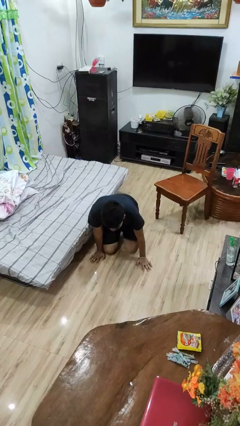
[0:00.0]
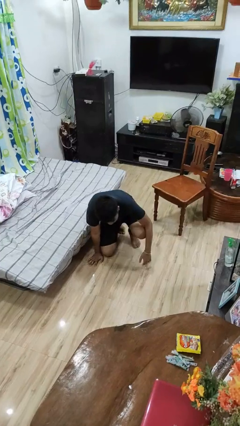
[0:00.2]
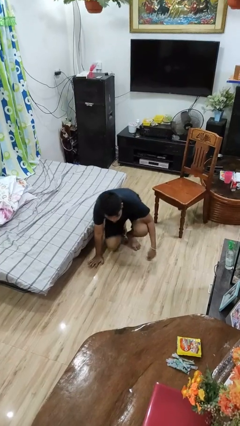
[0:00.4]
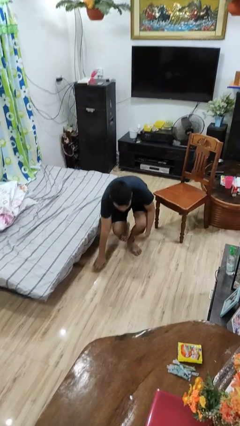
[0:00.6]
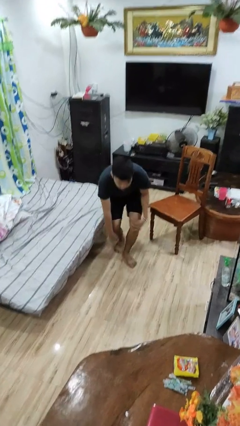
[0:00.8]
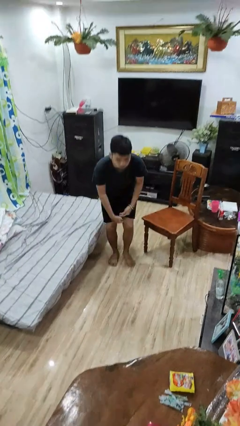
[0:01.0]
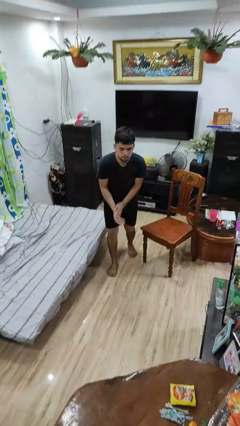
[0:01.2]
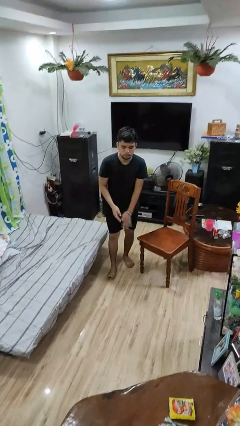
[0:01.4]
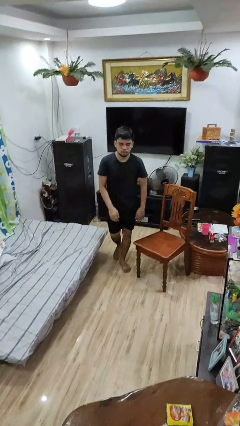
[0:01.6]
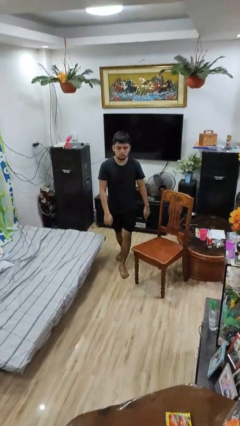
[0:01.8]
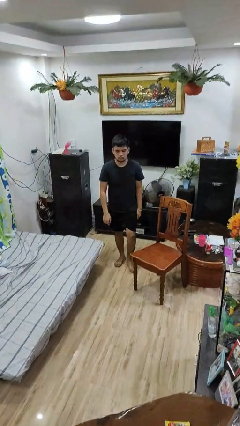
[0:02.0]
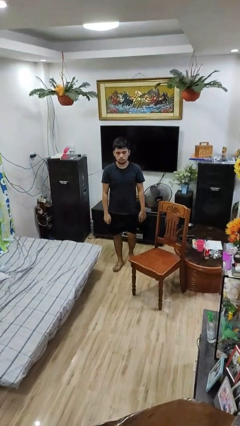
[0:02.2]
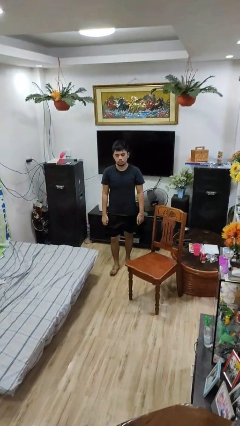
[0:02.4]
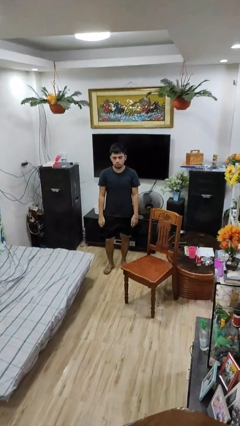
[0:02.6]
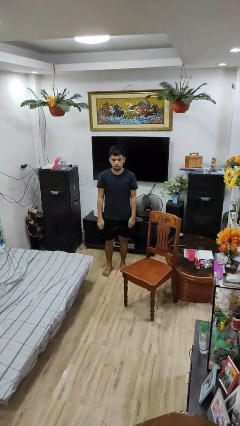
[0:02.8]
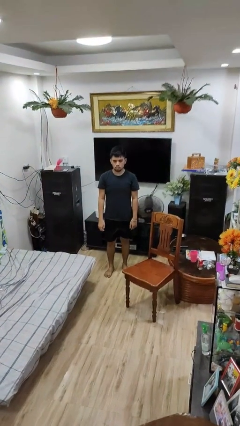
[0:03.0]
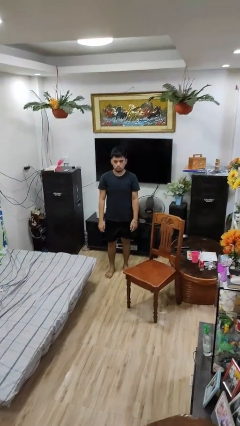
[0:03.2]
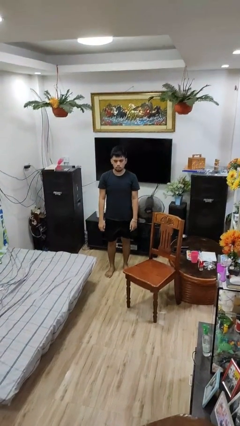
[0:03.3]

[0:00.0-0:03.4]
person stands up from floor

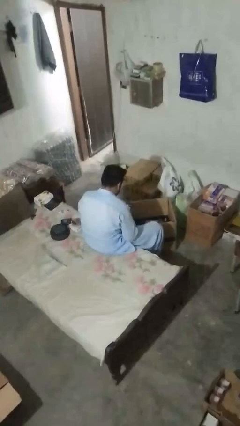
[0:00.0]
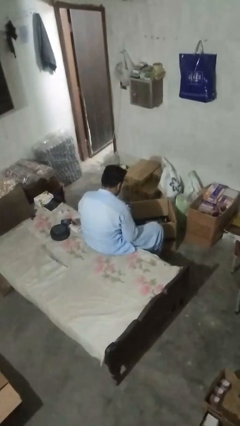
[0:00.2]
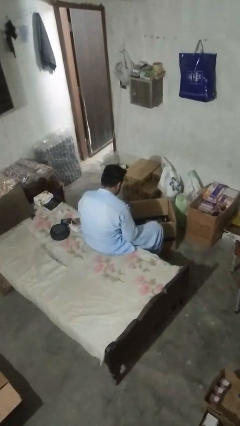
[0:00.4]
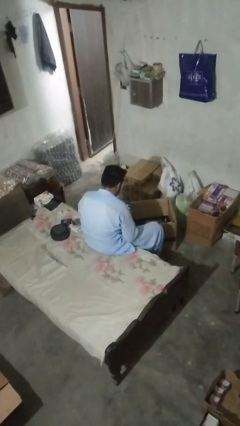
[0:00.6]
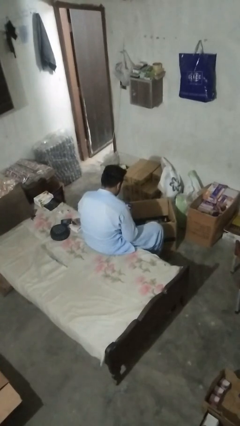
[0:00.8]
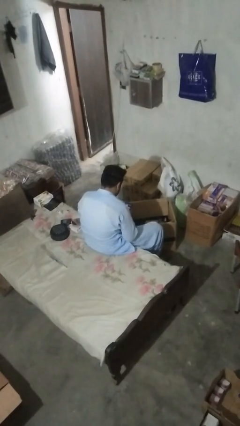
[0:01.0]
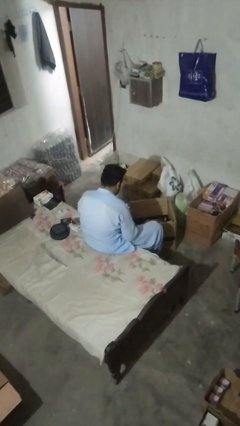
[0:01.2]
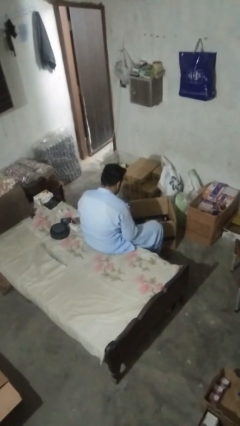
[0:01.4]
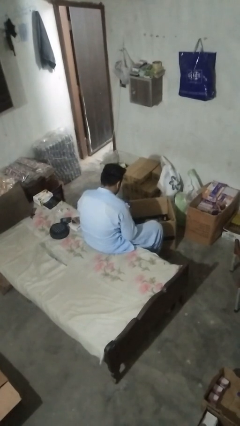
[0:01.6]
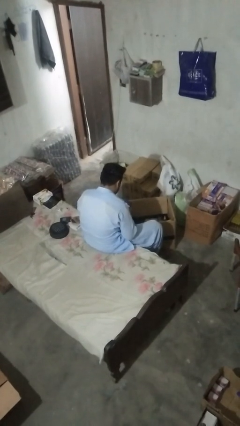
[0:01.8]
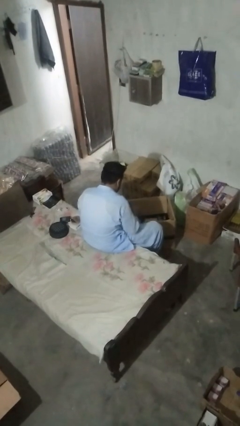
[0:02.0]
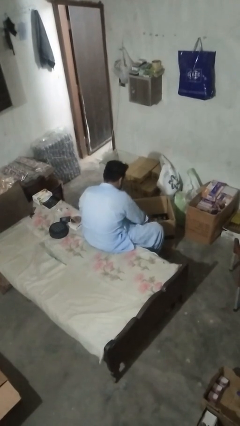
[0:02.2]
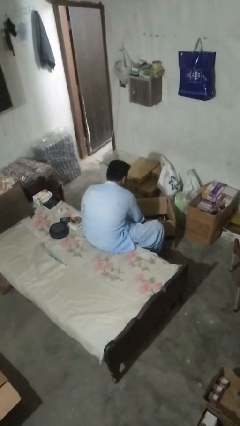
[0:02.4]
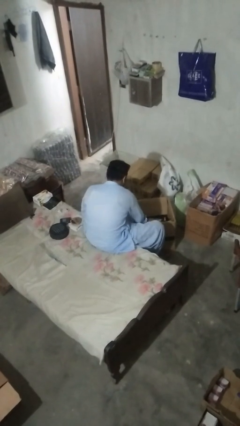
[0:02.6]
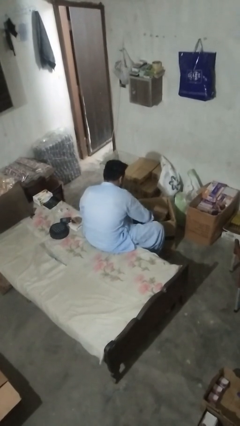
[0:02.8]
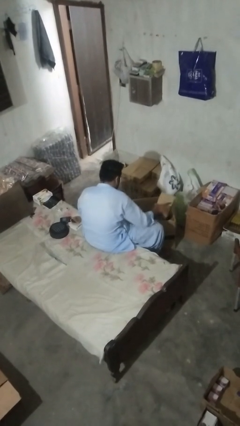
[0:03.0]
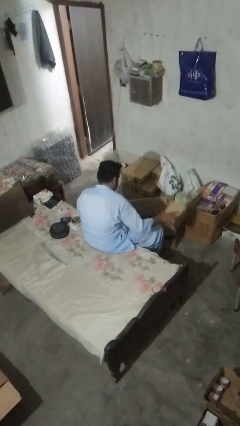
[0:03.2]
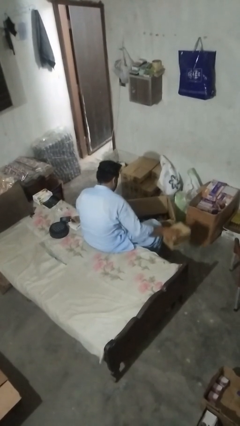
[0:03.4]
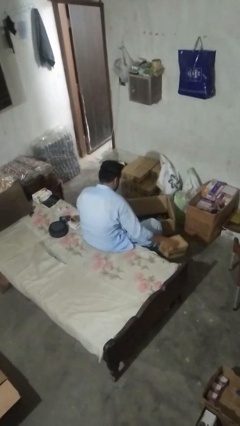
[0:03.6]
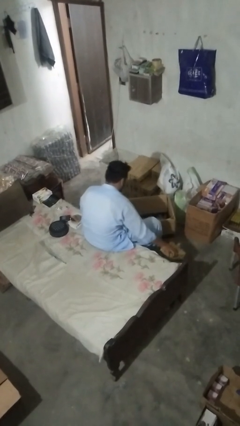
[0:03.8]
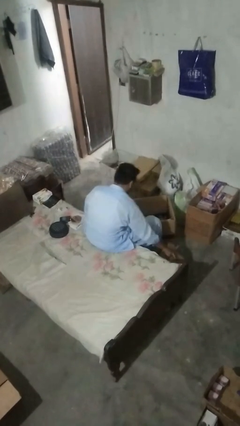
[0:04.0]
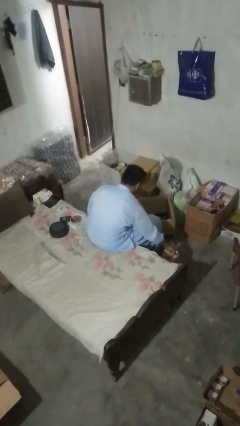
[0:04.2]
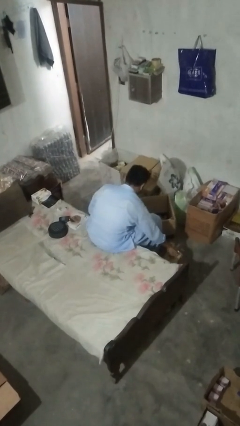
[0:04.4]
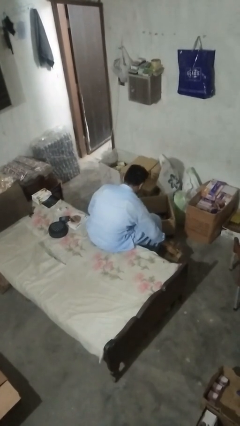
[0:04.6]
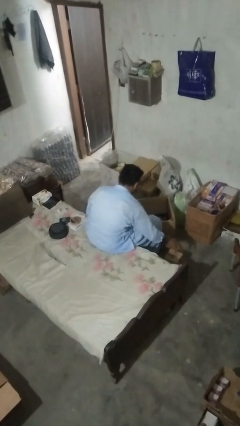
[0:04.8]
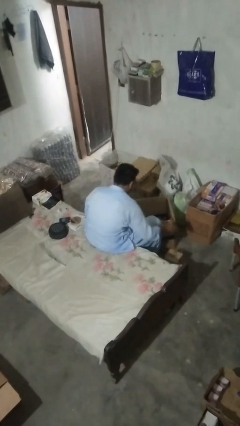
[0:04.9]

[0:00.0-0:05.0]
person takes object from box

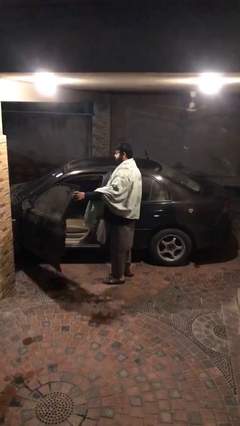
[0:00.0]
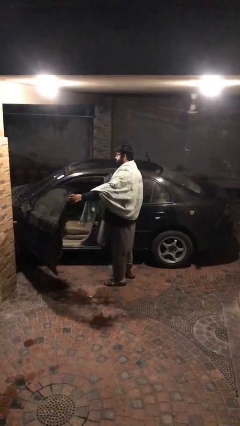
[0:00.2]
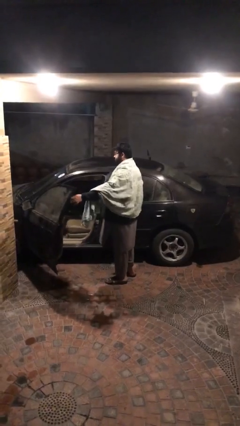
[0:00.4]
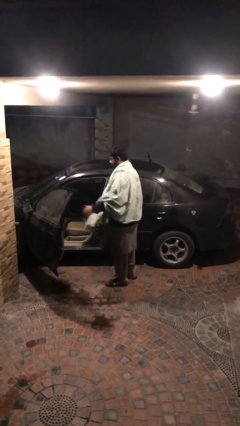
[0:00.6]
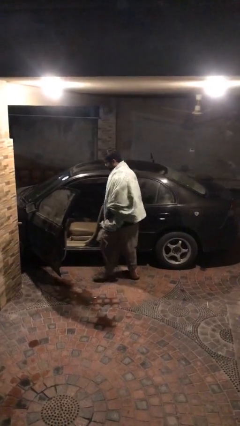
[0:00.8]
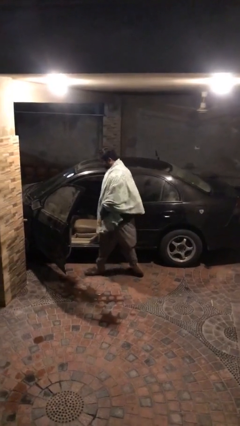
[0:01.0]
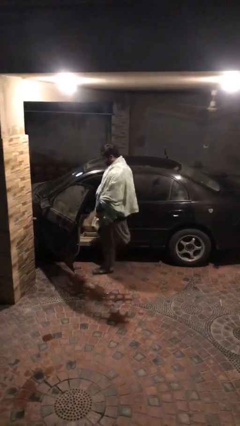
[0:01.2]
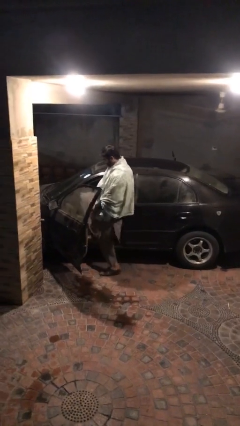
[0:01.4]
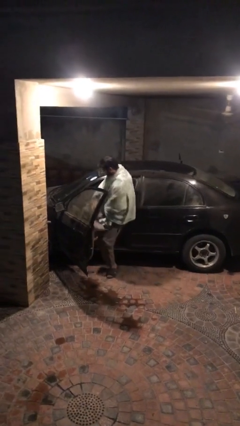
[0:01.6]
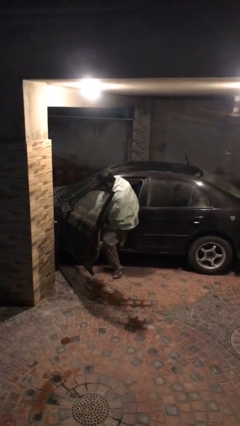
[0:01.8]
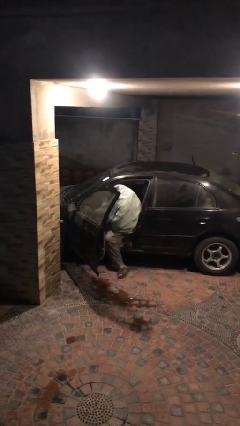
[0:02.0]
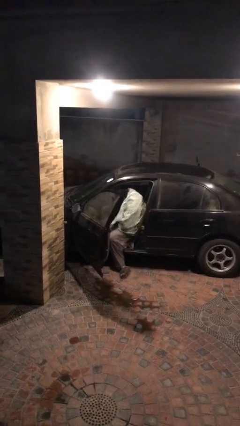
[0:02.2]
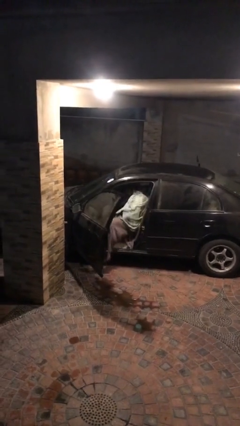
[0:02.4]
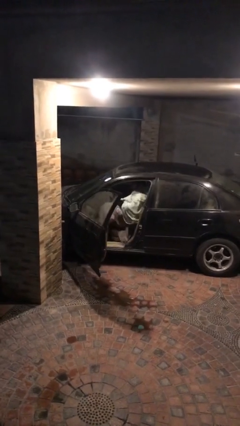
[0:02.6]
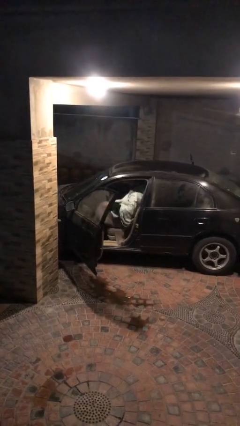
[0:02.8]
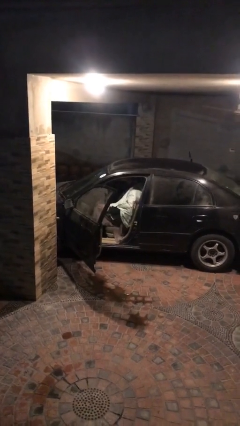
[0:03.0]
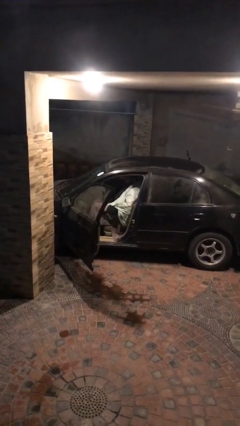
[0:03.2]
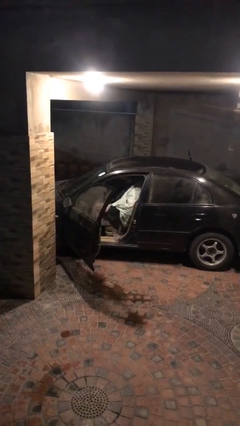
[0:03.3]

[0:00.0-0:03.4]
person enters car

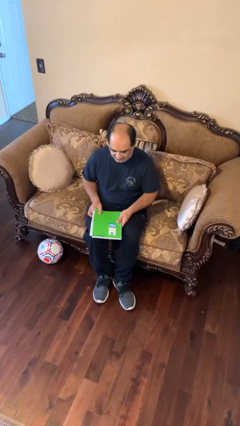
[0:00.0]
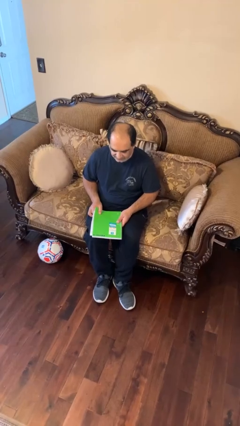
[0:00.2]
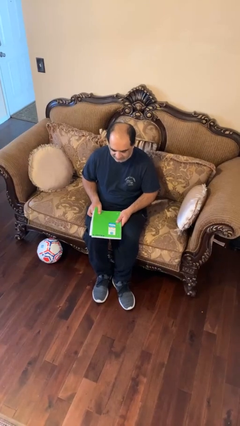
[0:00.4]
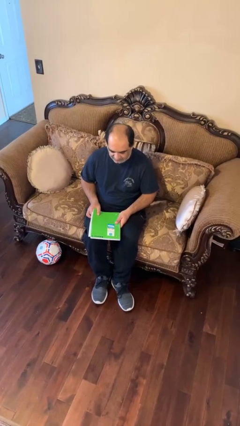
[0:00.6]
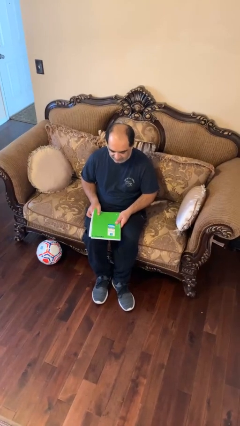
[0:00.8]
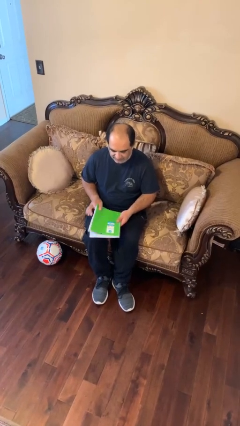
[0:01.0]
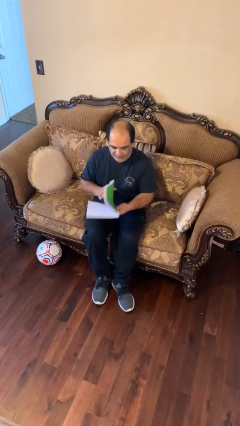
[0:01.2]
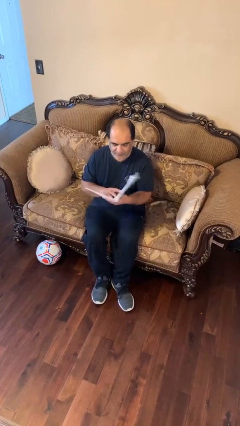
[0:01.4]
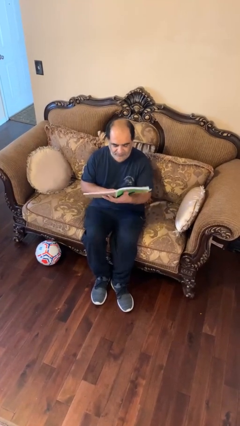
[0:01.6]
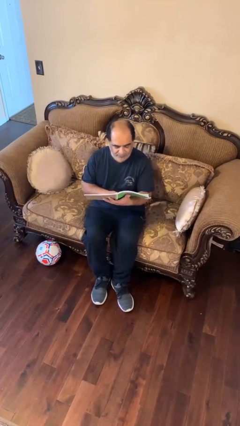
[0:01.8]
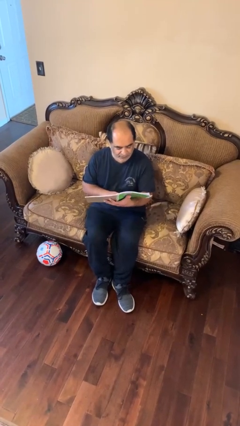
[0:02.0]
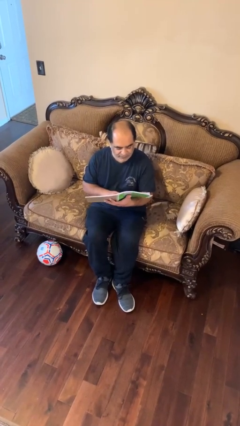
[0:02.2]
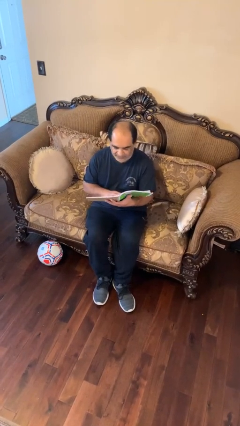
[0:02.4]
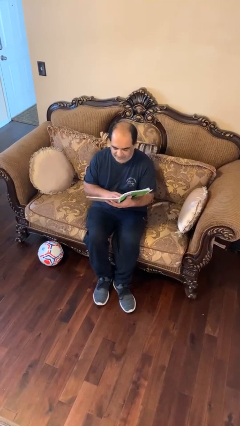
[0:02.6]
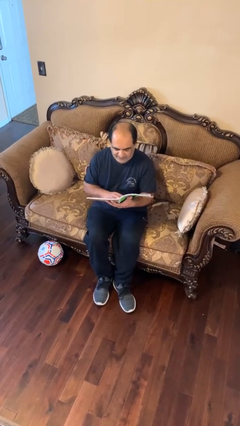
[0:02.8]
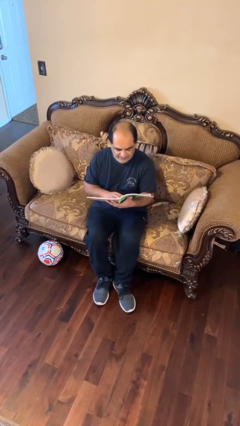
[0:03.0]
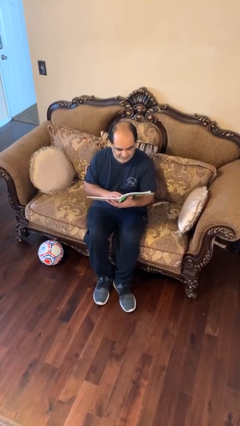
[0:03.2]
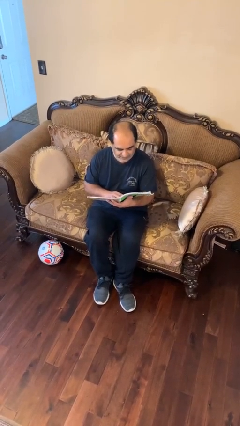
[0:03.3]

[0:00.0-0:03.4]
person reads document

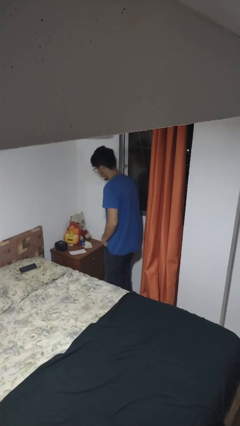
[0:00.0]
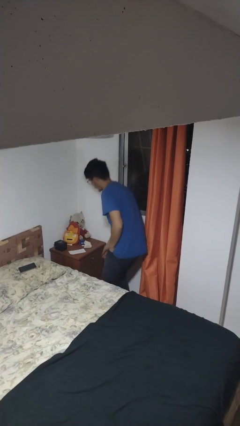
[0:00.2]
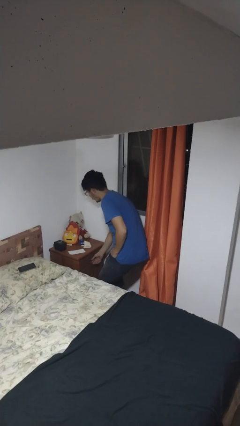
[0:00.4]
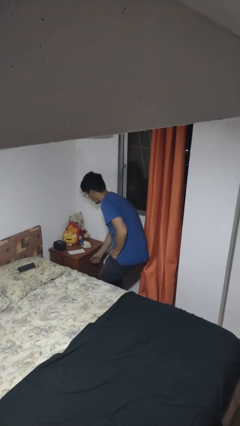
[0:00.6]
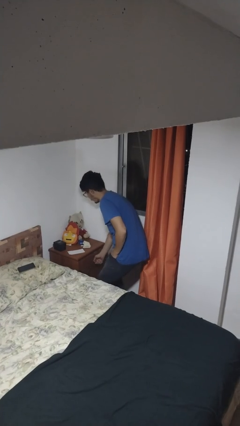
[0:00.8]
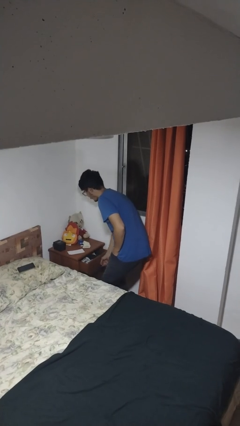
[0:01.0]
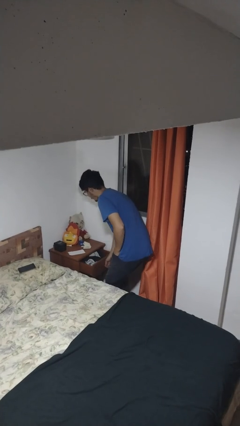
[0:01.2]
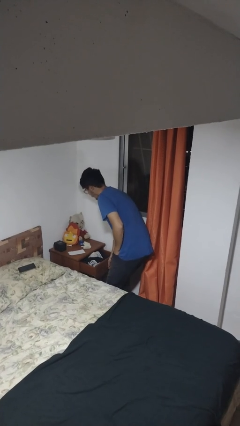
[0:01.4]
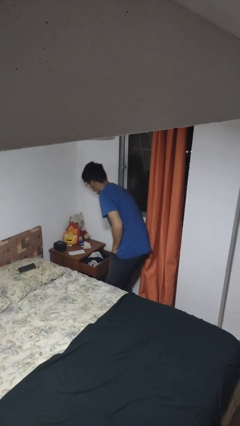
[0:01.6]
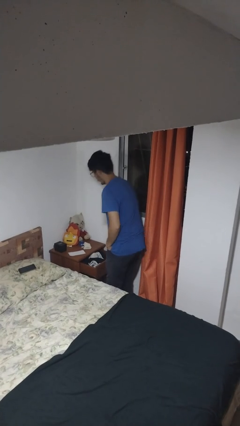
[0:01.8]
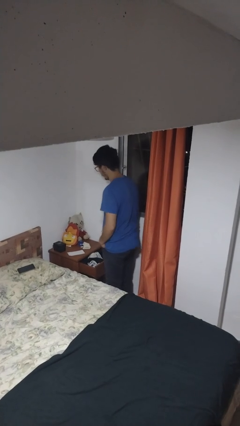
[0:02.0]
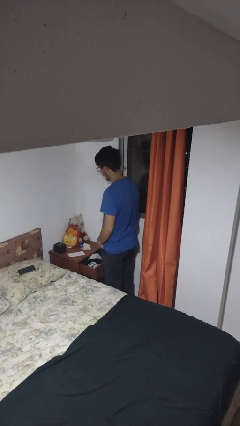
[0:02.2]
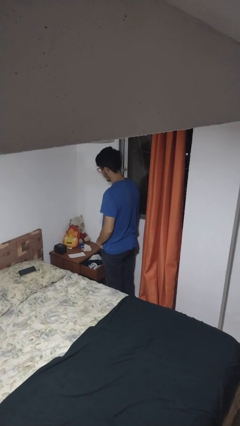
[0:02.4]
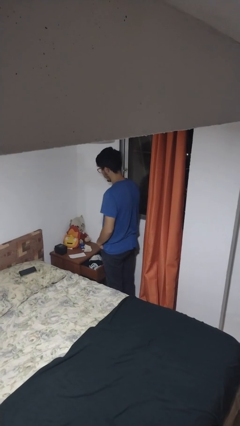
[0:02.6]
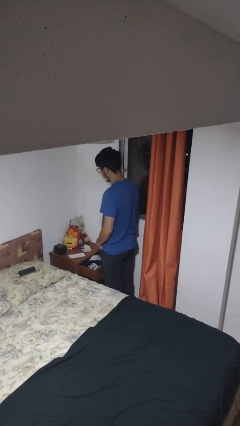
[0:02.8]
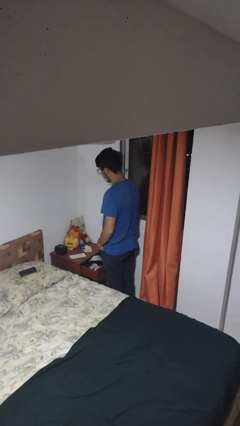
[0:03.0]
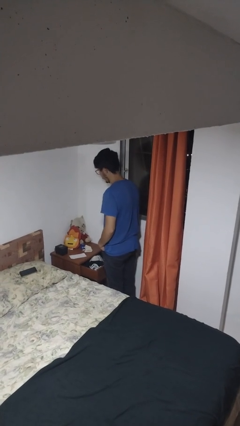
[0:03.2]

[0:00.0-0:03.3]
person opens dresser drawer
